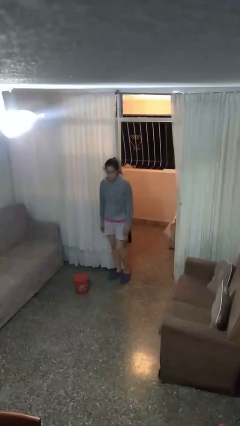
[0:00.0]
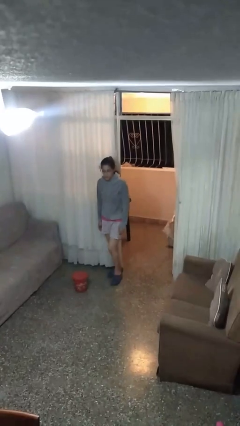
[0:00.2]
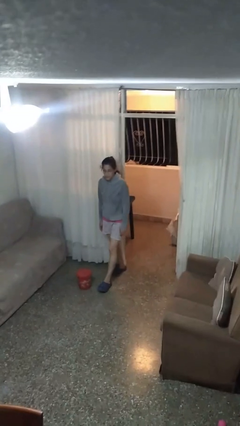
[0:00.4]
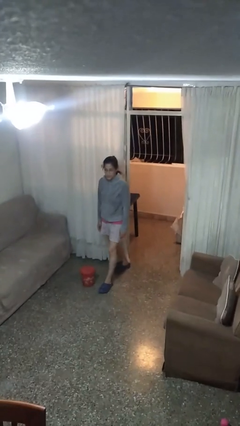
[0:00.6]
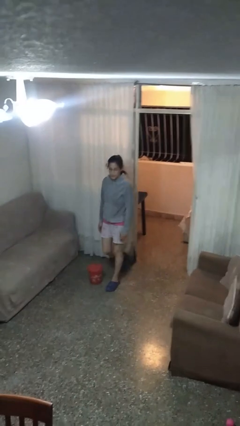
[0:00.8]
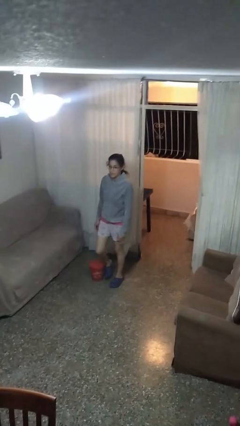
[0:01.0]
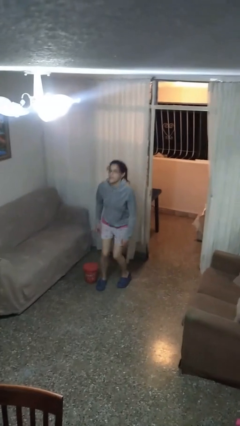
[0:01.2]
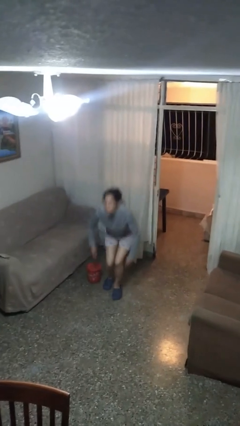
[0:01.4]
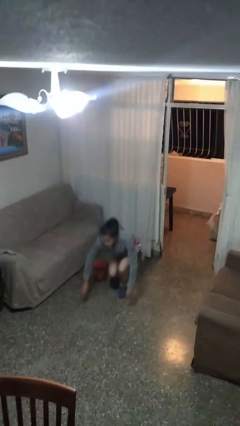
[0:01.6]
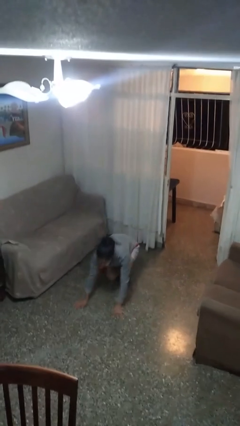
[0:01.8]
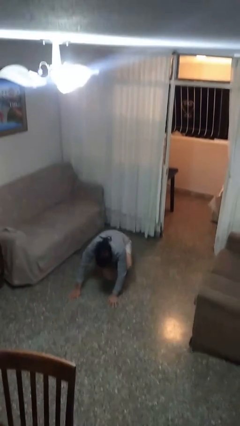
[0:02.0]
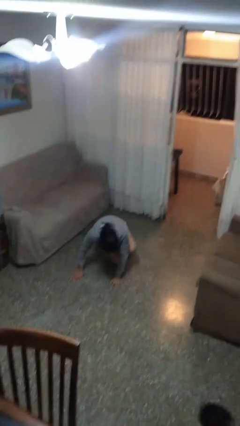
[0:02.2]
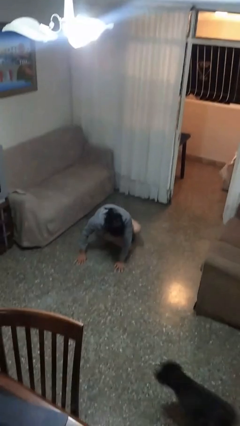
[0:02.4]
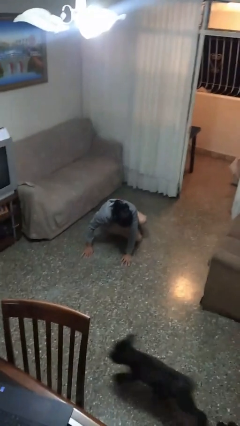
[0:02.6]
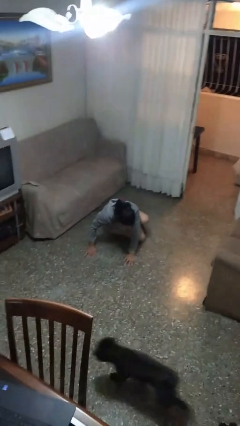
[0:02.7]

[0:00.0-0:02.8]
person trips on object on floor

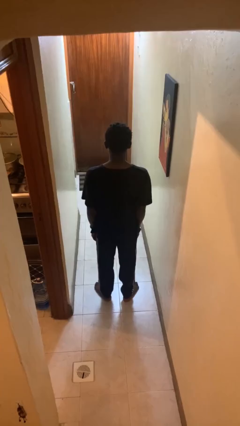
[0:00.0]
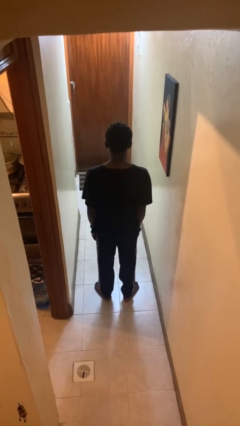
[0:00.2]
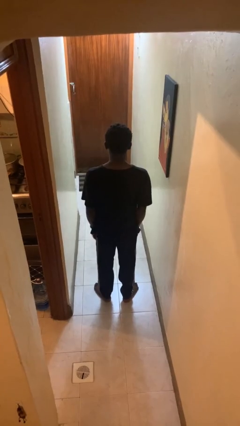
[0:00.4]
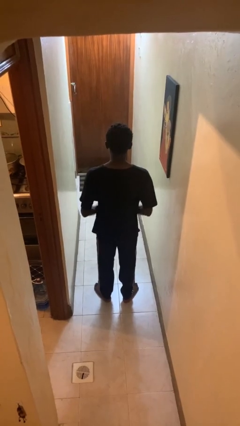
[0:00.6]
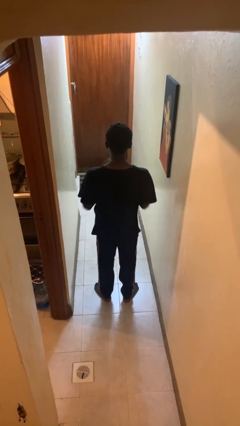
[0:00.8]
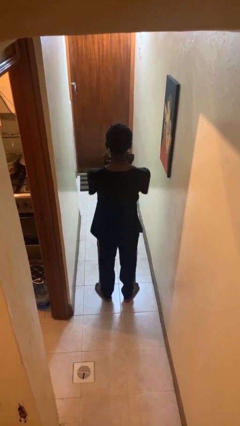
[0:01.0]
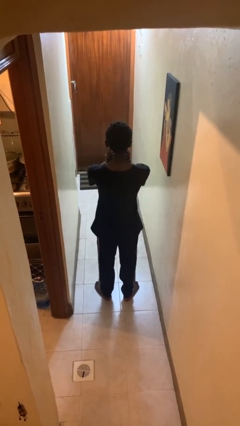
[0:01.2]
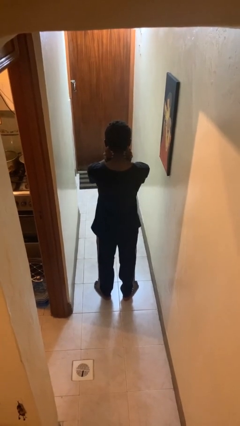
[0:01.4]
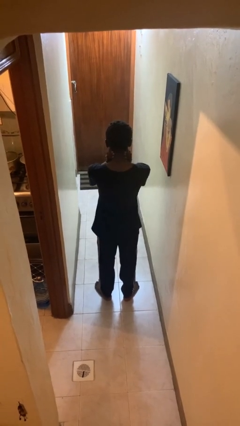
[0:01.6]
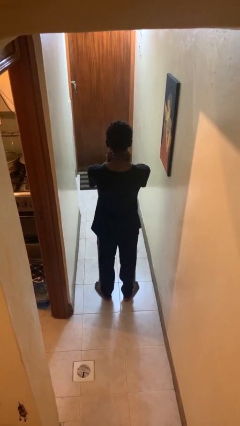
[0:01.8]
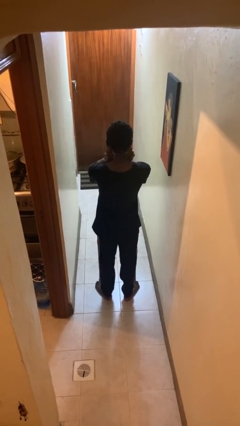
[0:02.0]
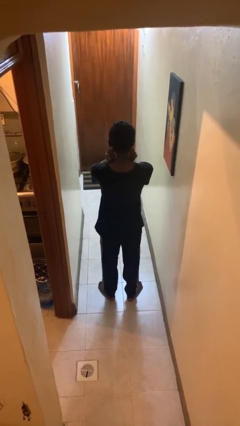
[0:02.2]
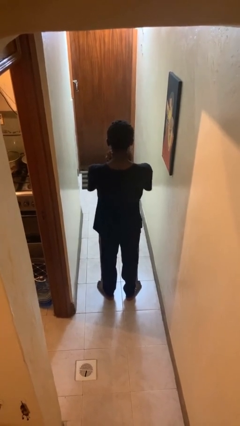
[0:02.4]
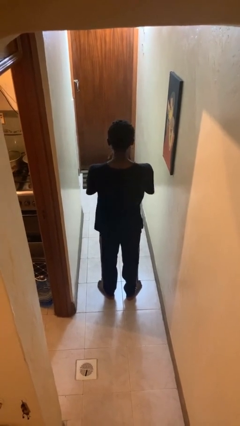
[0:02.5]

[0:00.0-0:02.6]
person rubs neck

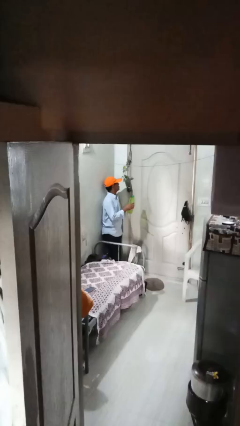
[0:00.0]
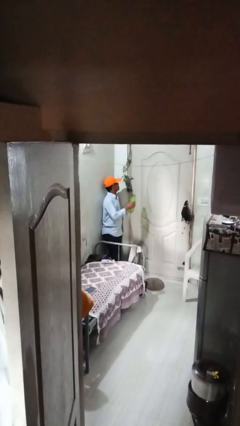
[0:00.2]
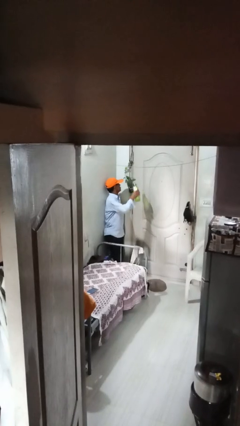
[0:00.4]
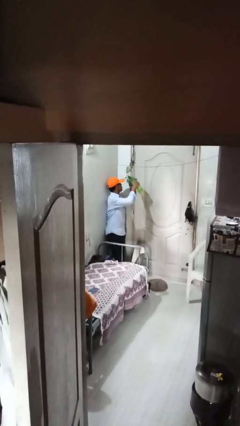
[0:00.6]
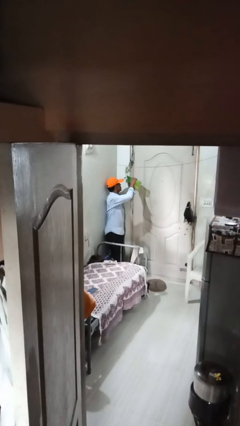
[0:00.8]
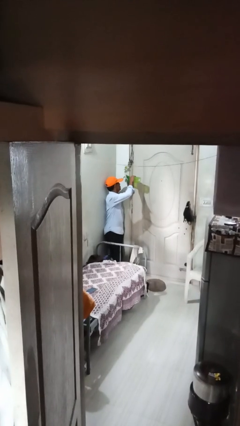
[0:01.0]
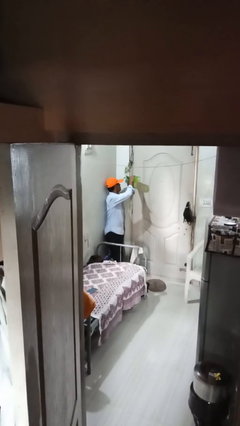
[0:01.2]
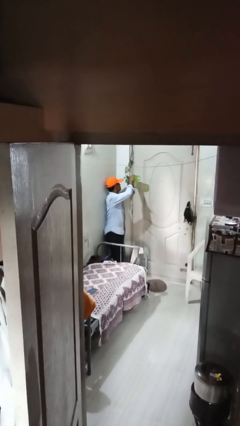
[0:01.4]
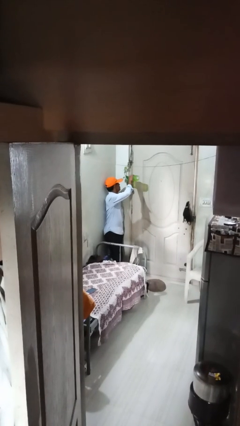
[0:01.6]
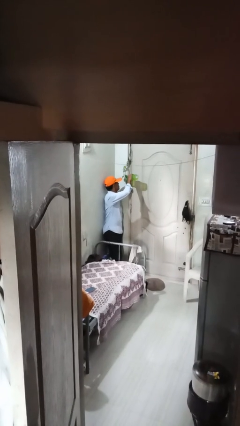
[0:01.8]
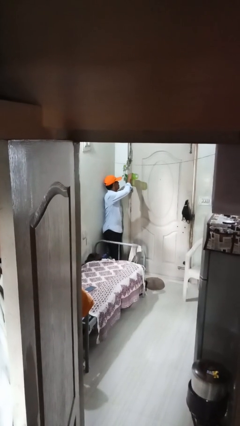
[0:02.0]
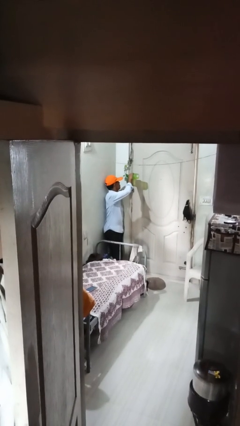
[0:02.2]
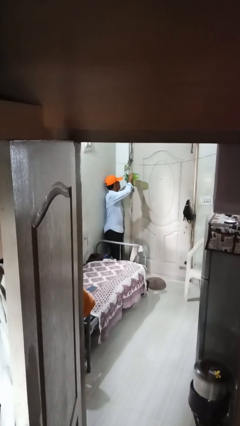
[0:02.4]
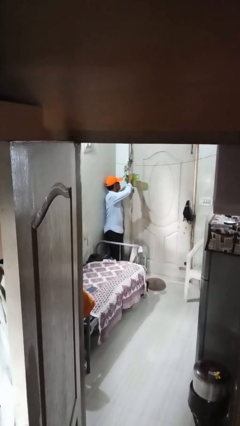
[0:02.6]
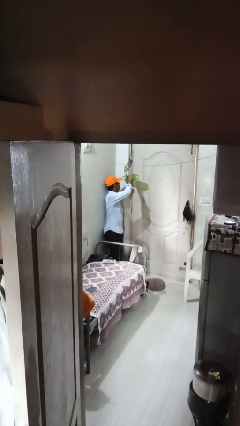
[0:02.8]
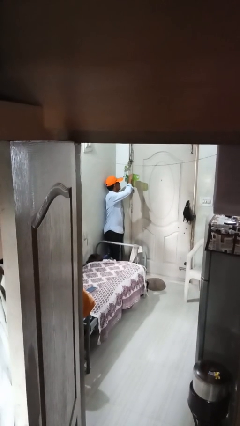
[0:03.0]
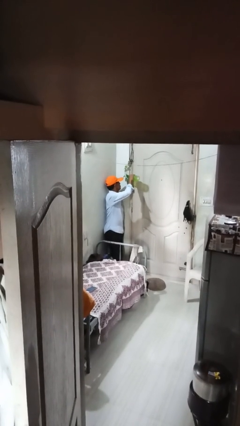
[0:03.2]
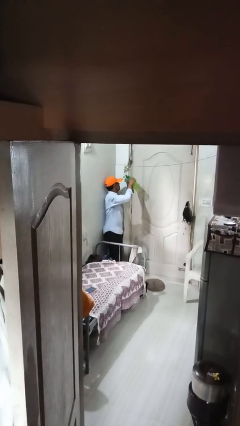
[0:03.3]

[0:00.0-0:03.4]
person waters houseplant

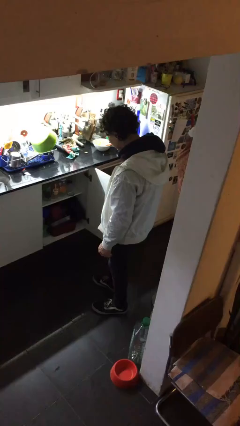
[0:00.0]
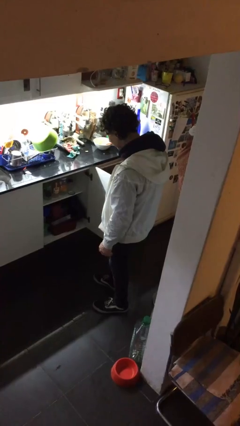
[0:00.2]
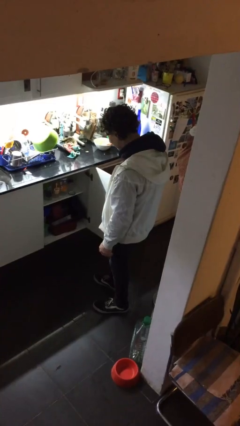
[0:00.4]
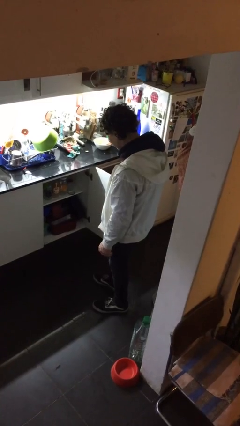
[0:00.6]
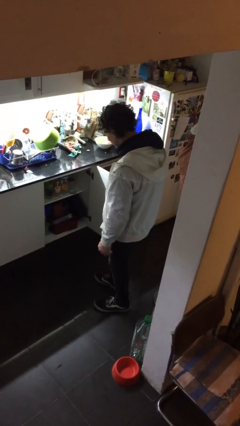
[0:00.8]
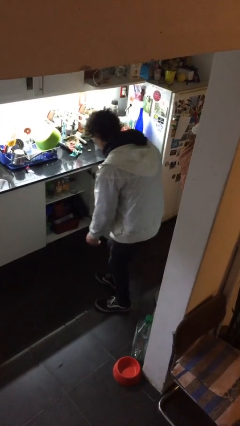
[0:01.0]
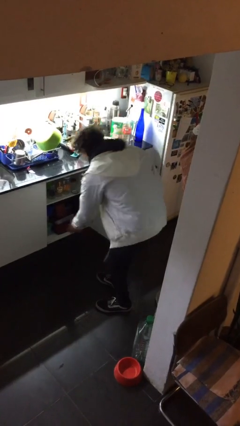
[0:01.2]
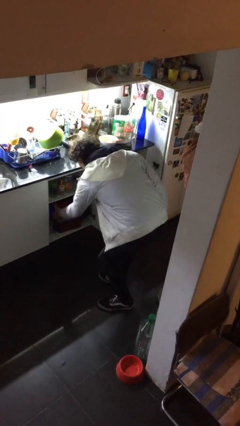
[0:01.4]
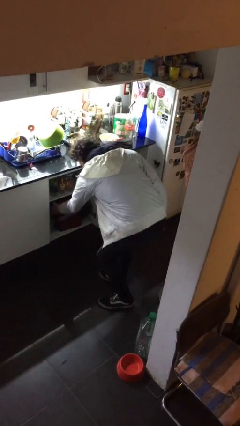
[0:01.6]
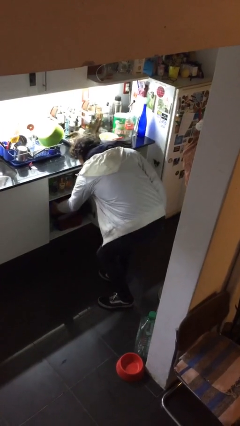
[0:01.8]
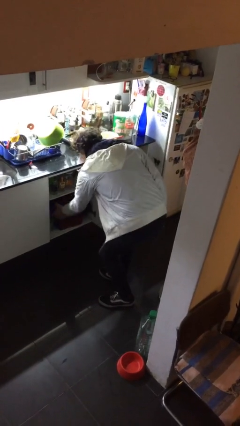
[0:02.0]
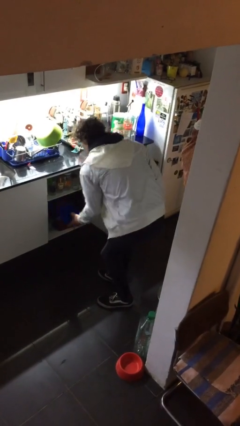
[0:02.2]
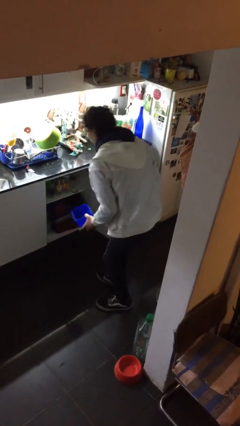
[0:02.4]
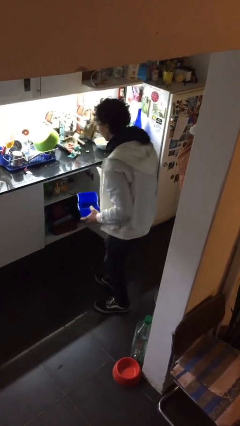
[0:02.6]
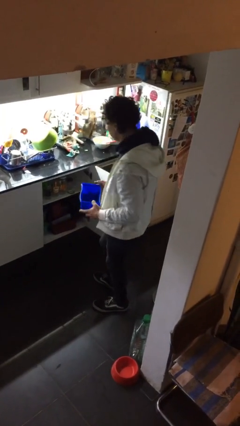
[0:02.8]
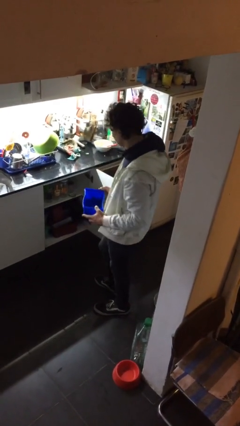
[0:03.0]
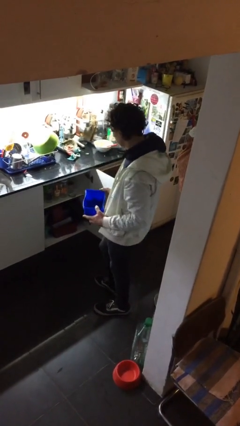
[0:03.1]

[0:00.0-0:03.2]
person picks up object from cabinet

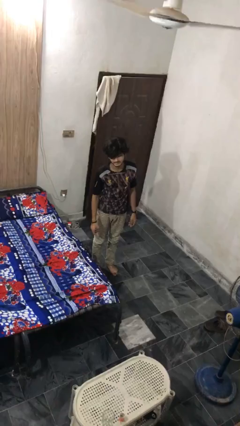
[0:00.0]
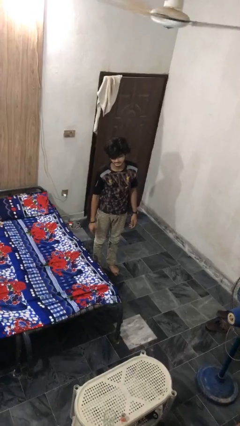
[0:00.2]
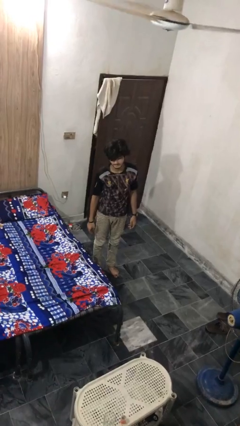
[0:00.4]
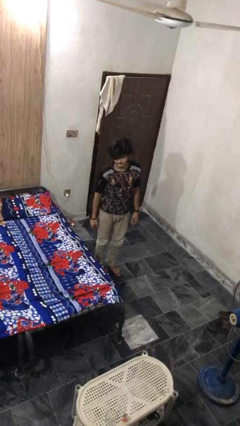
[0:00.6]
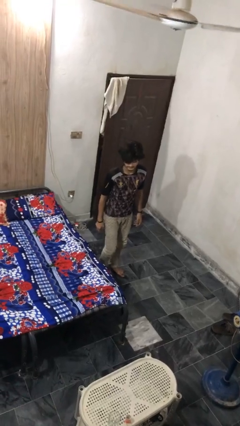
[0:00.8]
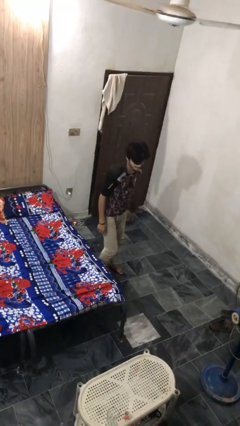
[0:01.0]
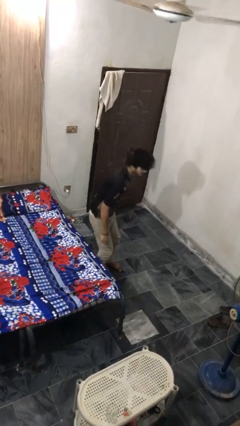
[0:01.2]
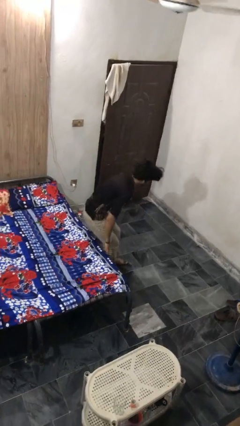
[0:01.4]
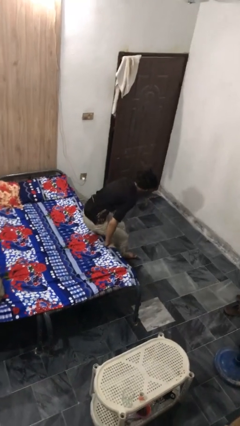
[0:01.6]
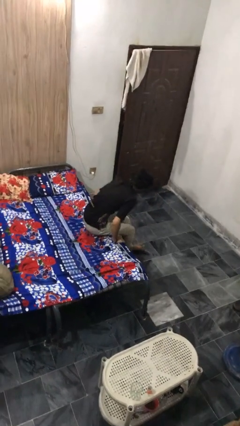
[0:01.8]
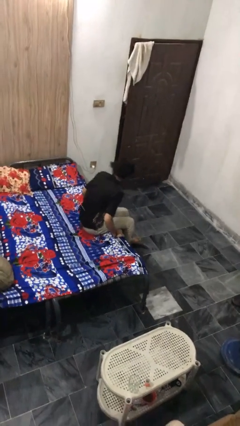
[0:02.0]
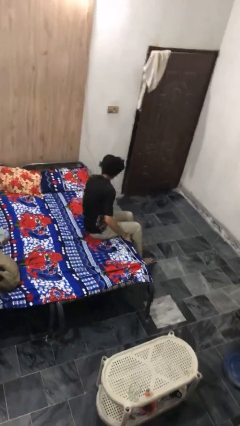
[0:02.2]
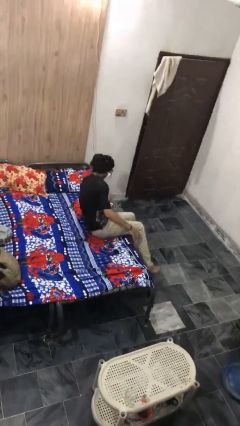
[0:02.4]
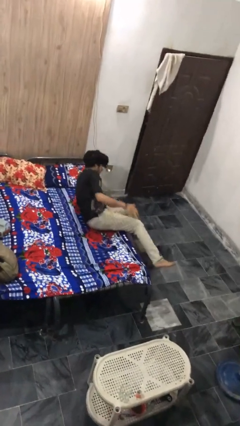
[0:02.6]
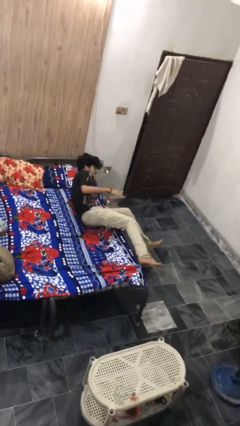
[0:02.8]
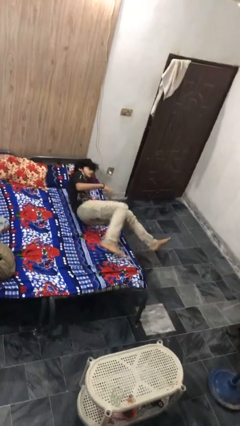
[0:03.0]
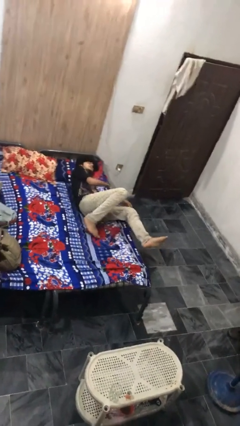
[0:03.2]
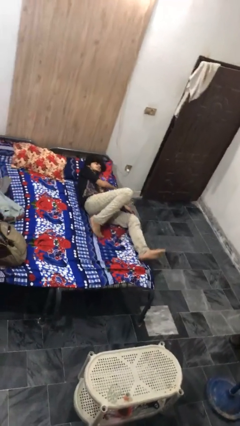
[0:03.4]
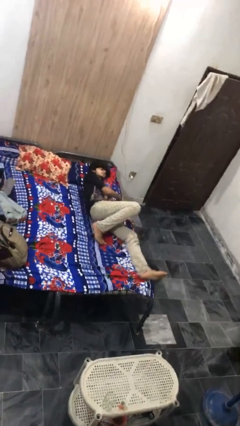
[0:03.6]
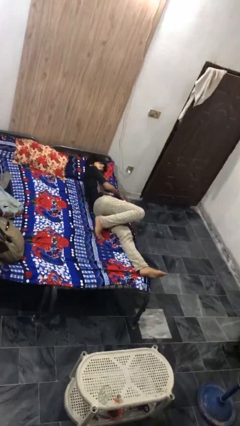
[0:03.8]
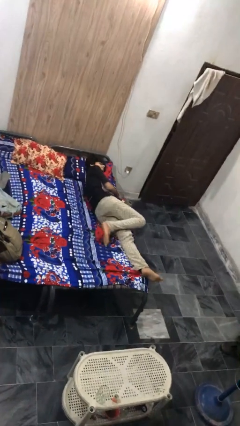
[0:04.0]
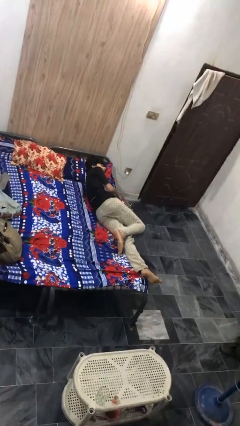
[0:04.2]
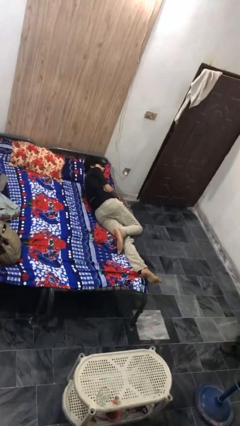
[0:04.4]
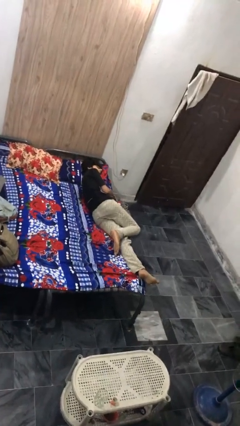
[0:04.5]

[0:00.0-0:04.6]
person lies down on bed

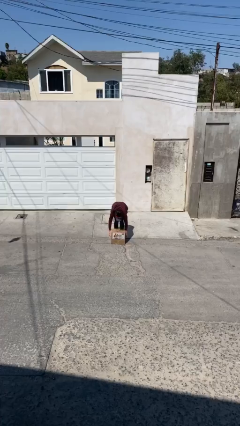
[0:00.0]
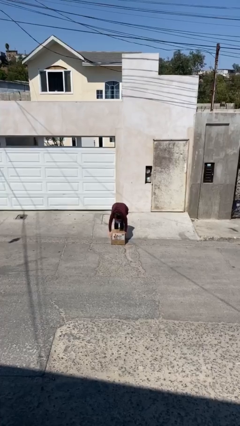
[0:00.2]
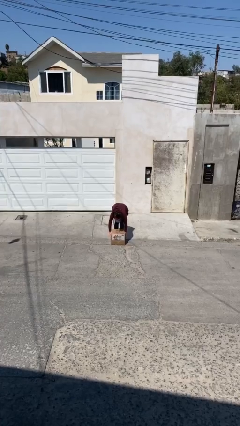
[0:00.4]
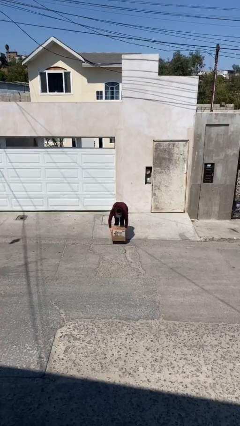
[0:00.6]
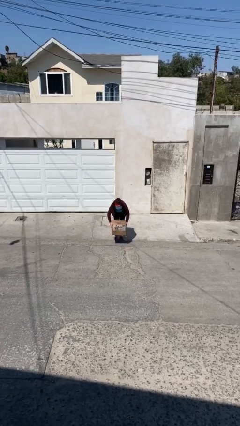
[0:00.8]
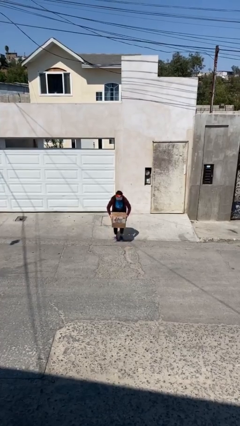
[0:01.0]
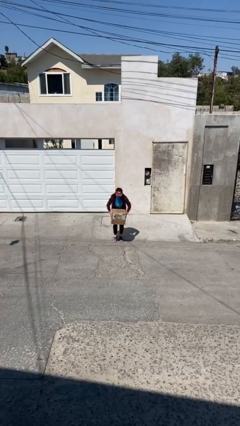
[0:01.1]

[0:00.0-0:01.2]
person picks up object from floor
